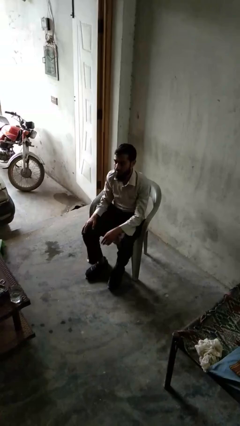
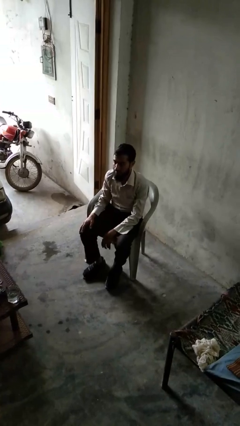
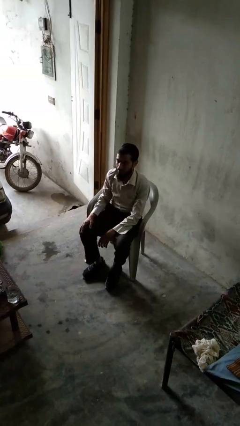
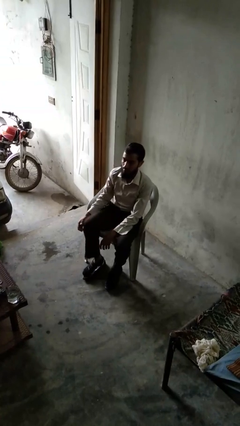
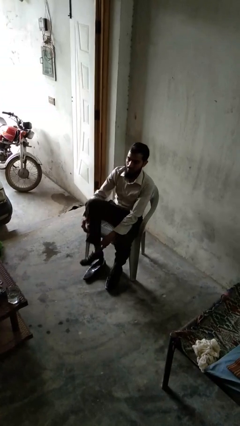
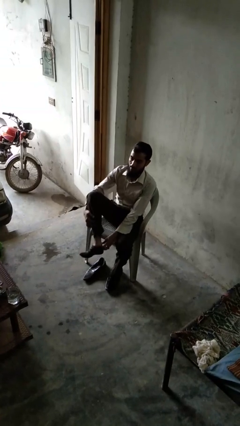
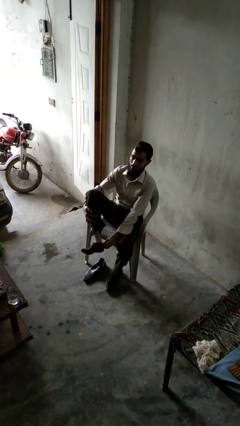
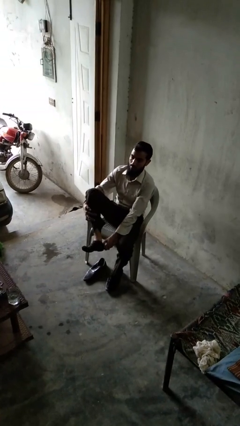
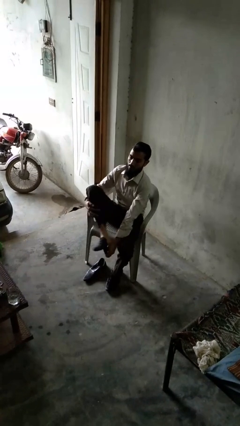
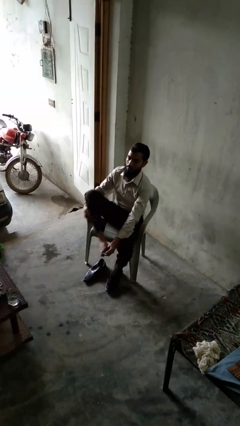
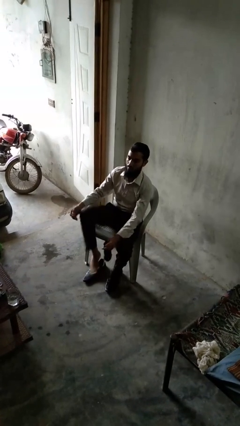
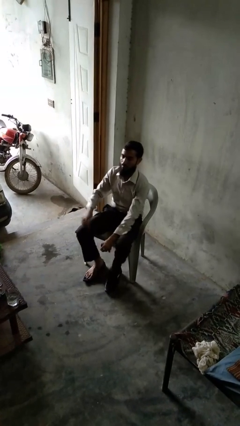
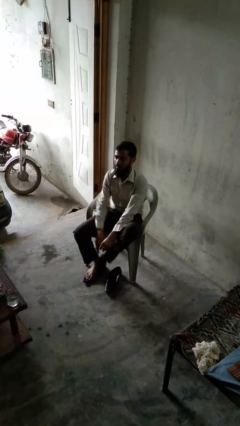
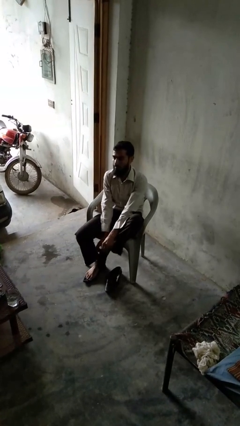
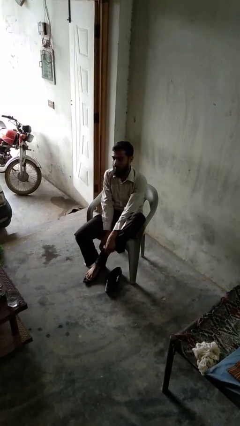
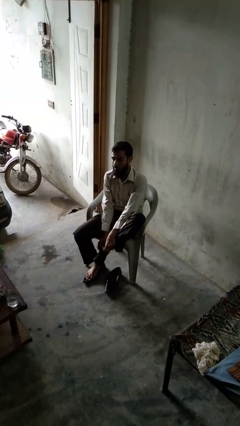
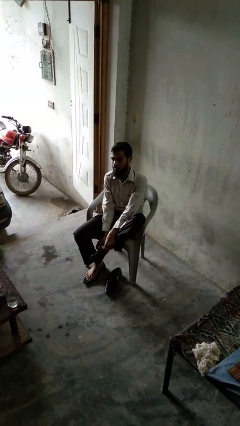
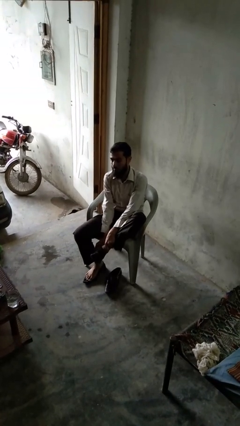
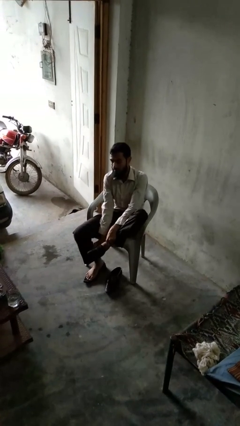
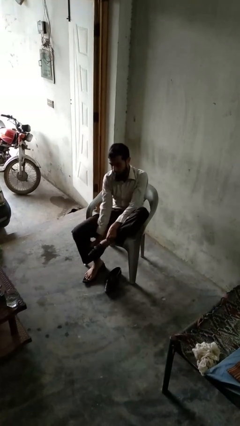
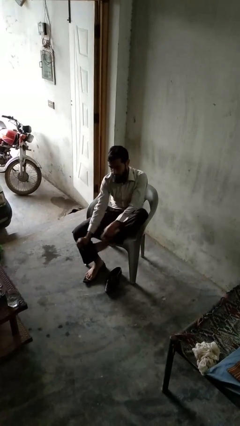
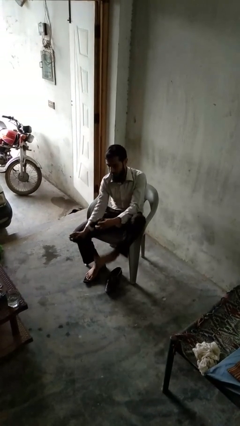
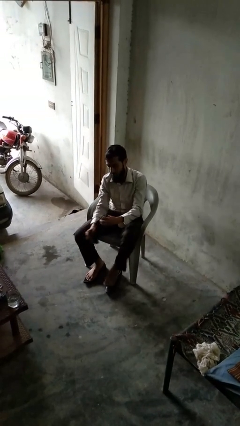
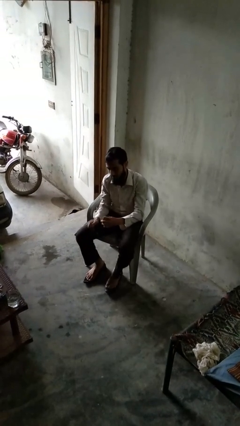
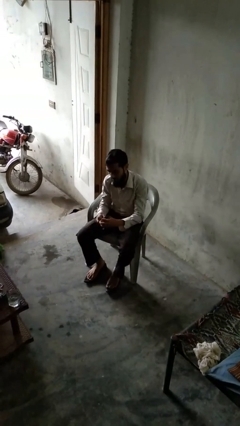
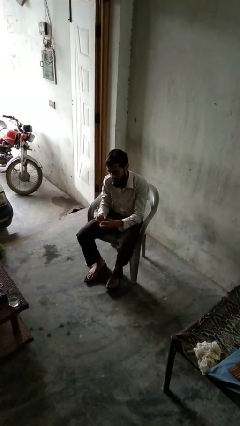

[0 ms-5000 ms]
person takes off socks

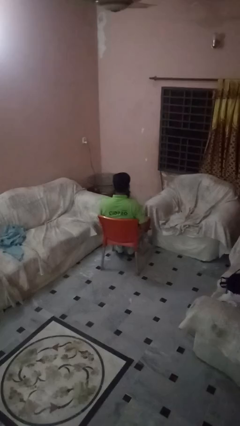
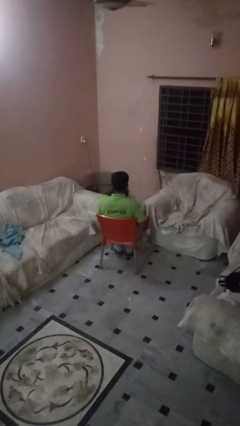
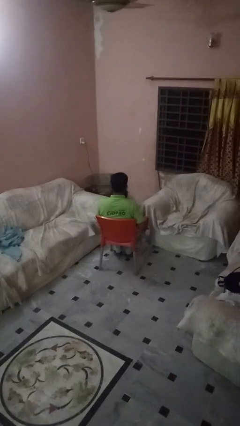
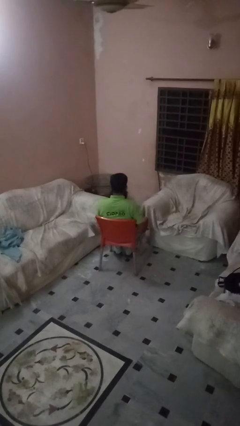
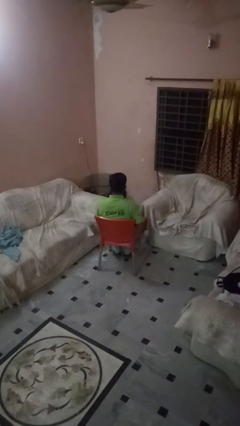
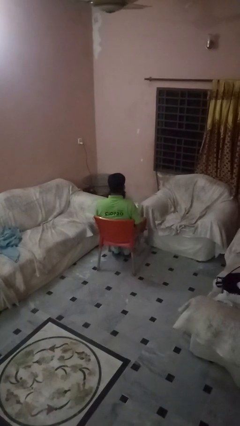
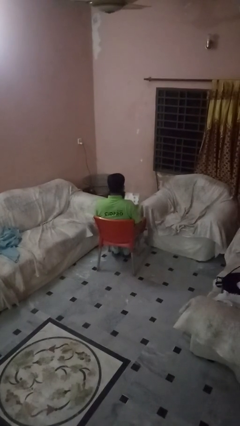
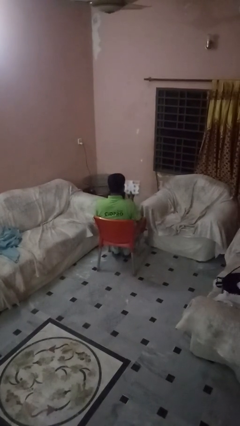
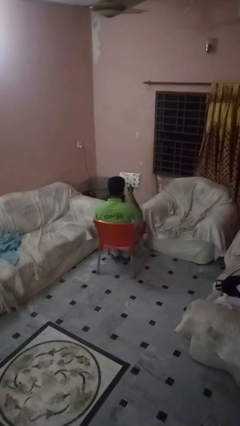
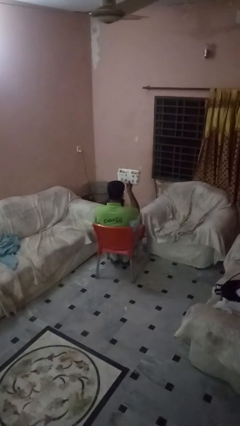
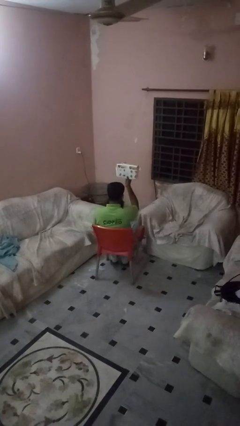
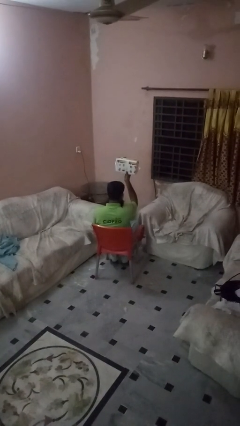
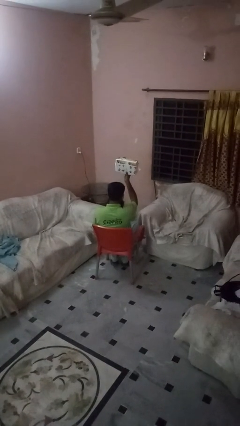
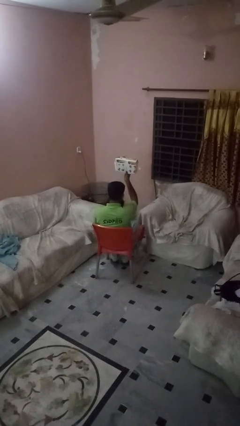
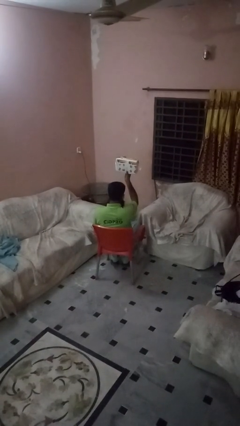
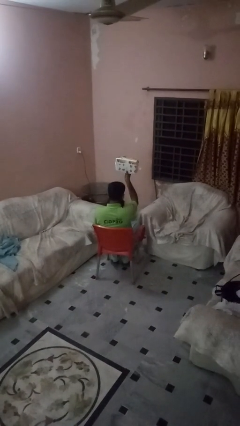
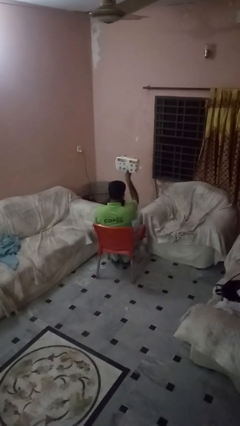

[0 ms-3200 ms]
person holds object above head

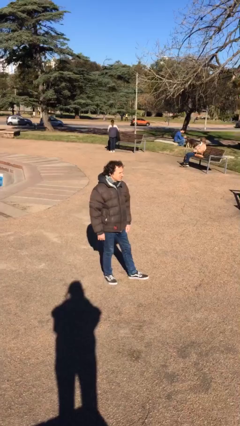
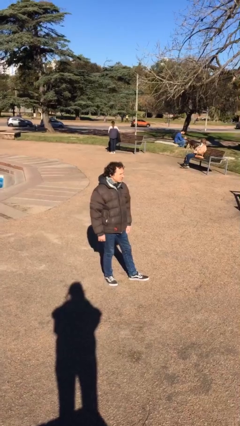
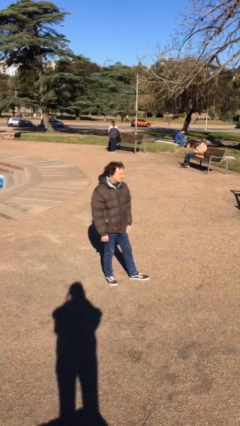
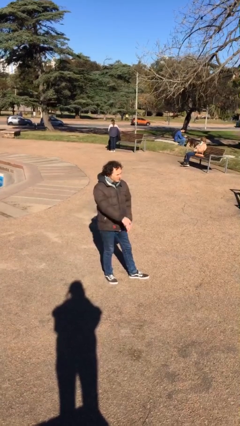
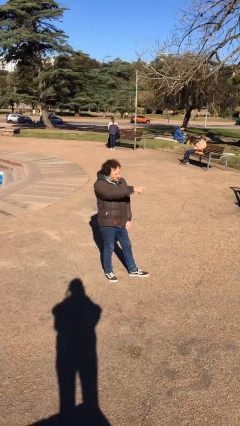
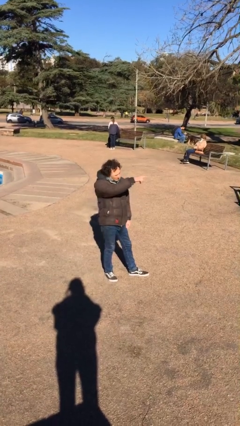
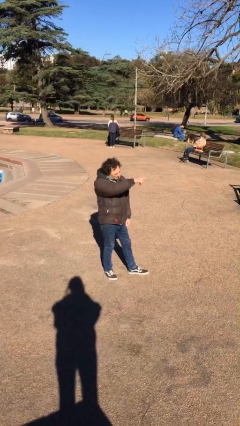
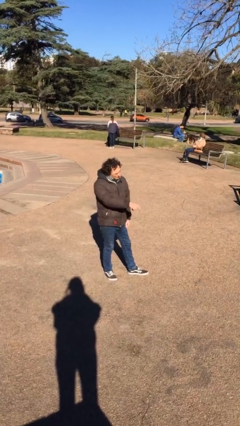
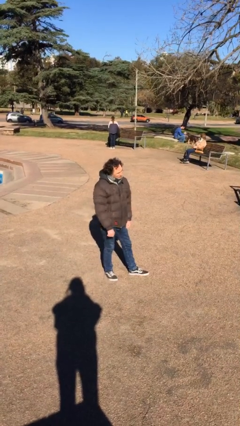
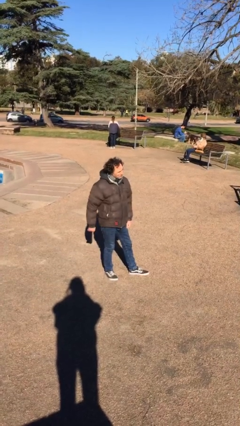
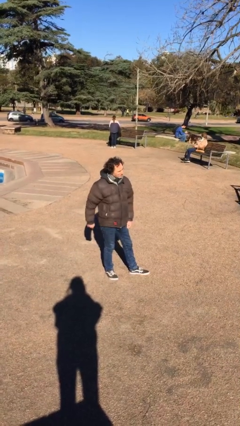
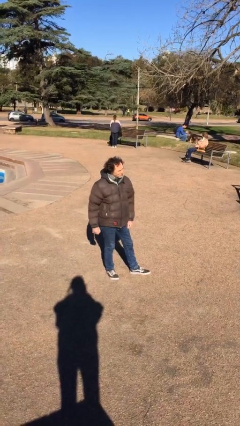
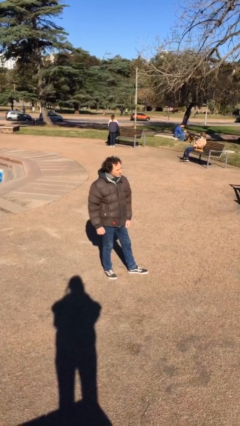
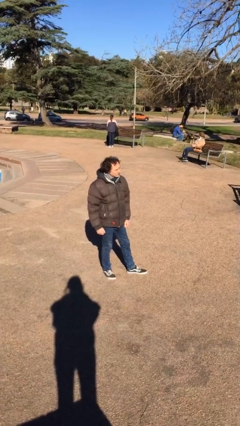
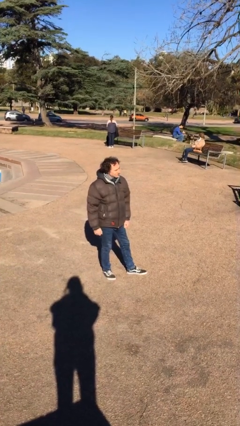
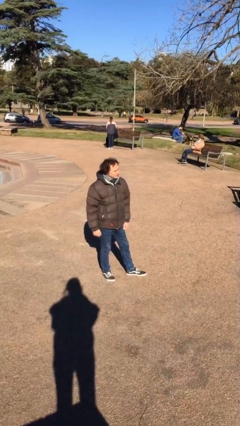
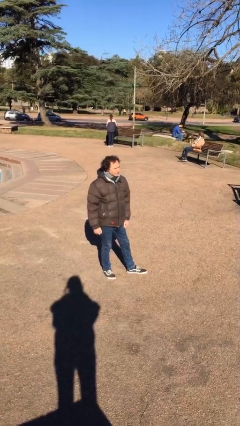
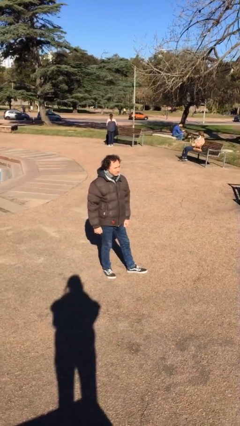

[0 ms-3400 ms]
person points at person

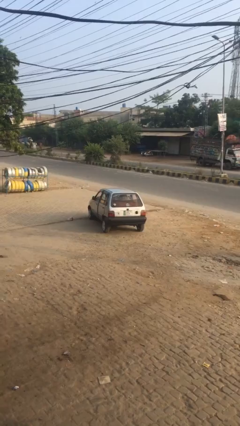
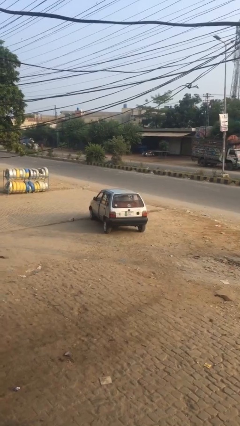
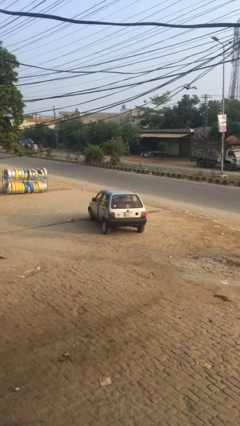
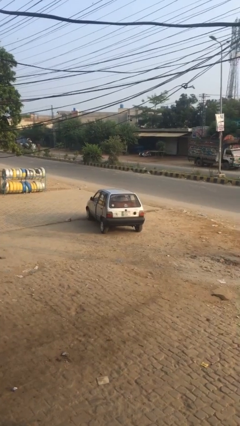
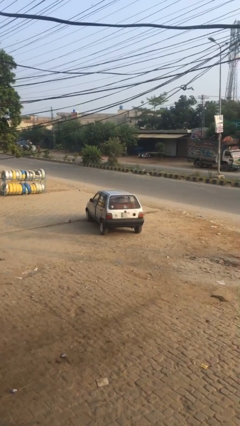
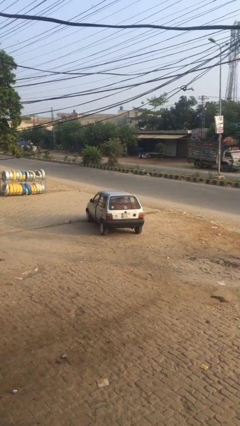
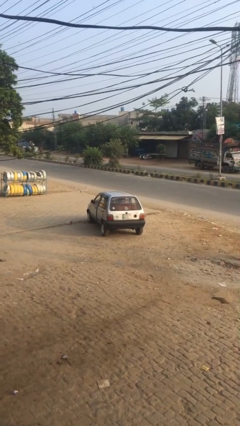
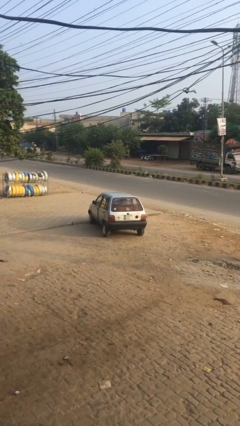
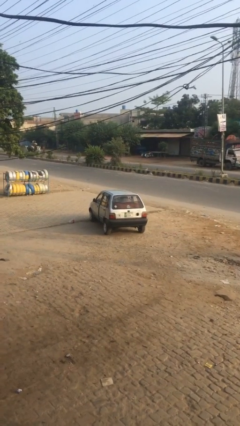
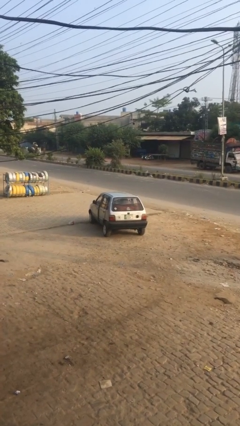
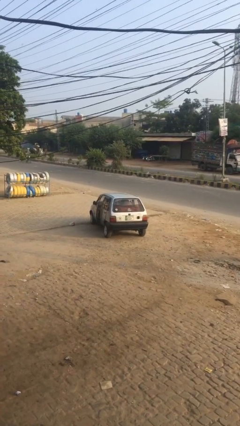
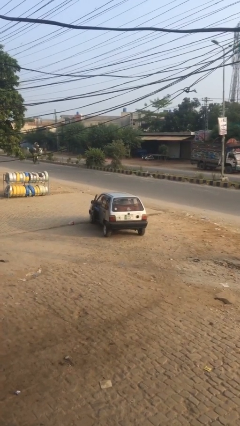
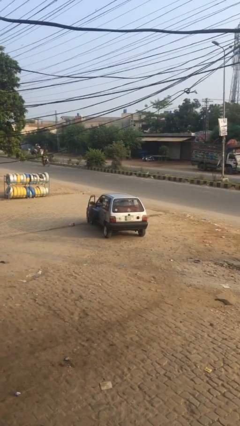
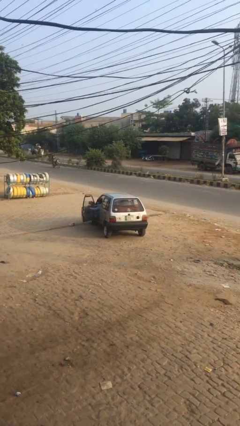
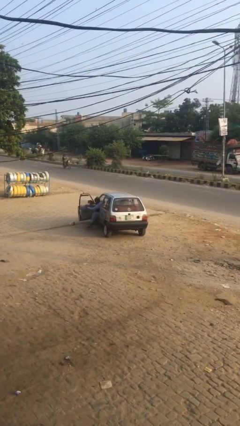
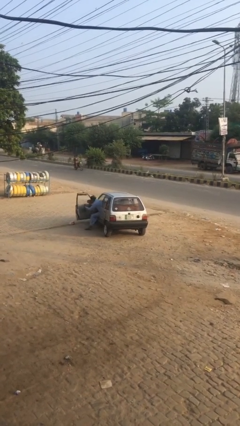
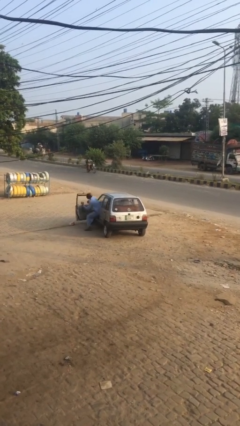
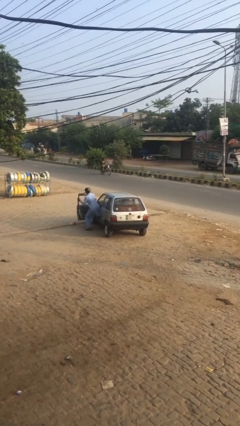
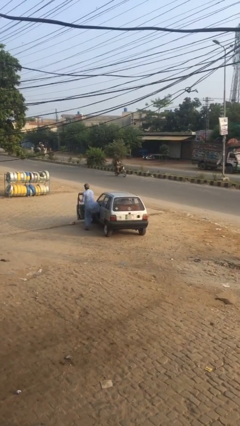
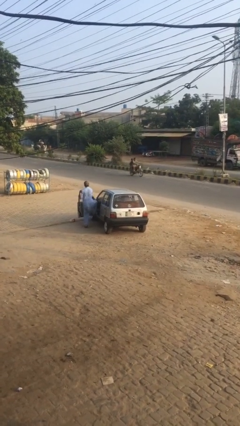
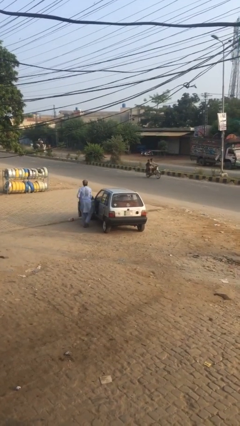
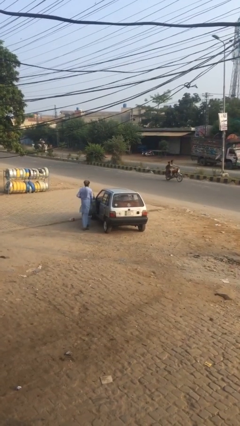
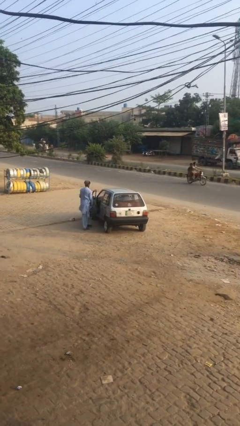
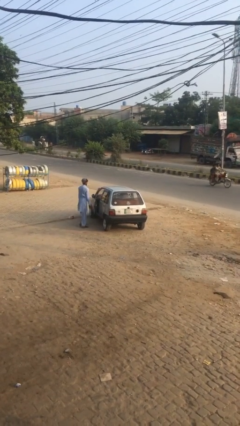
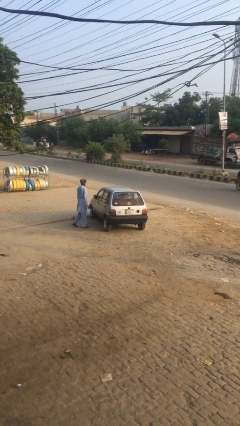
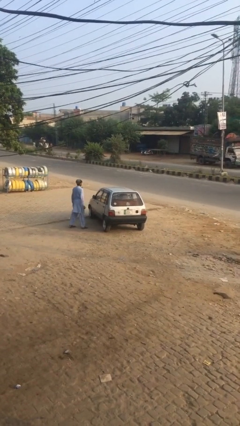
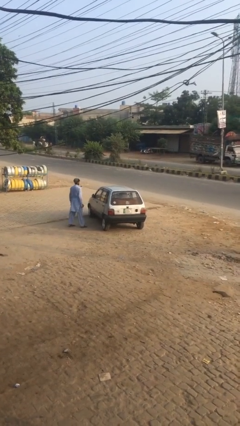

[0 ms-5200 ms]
car drops off person

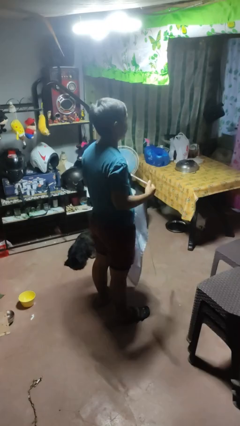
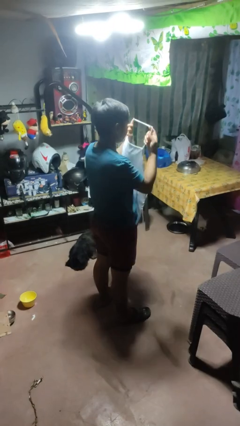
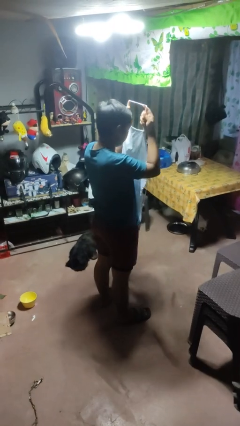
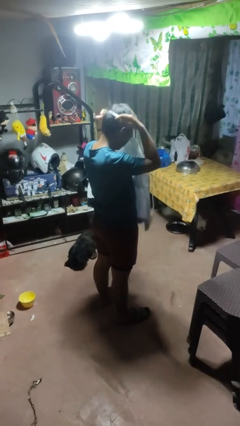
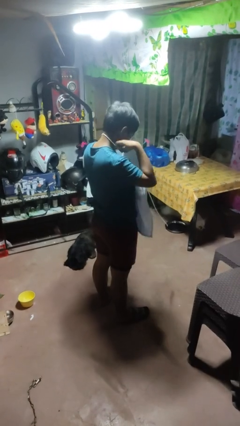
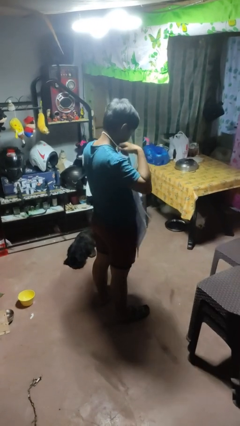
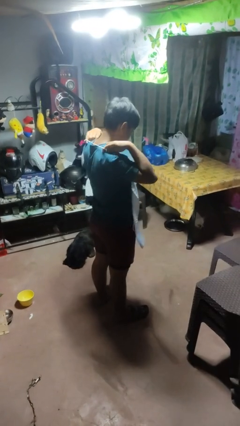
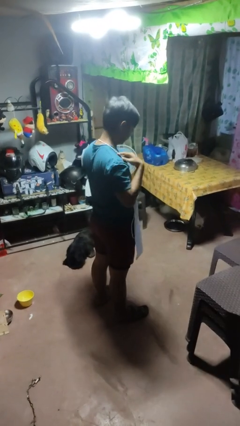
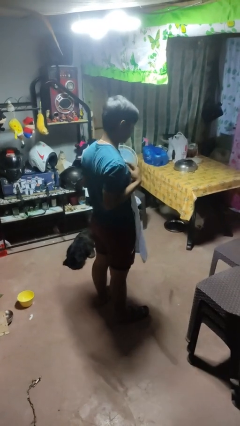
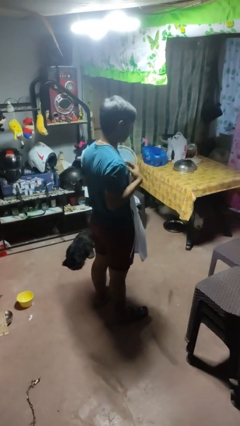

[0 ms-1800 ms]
person puts on apron
